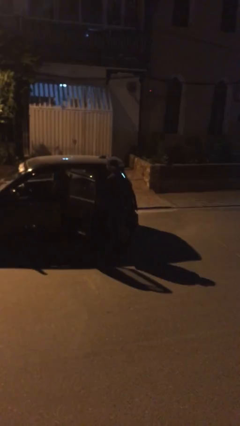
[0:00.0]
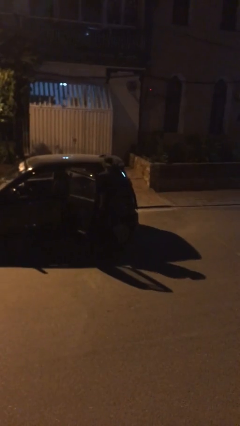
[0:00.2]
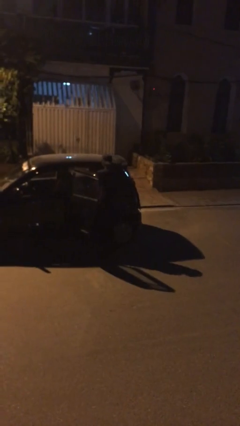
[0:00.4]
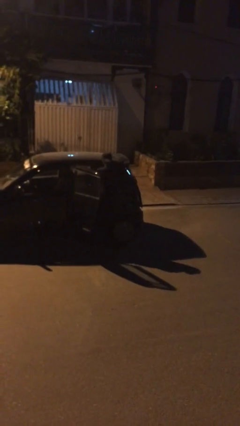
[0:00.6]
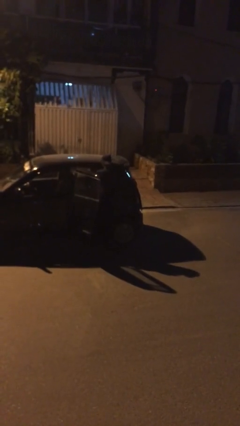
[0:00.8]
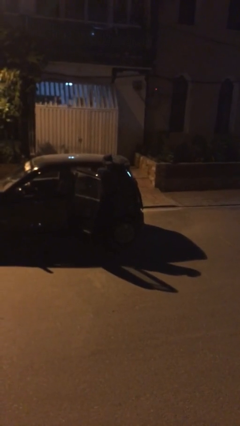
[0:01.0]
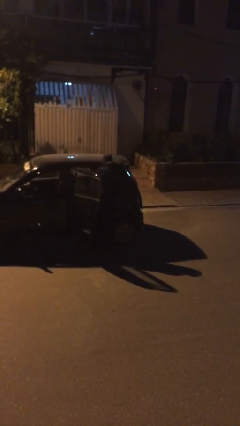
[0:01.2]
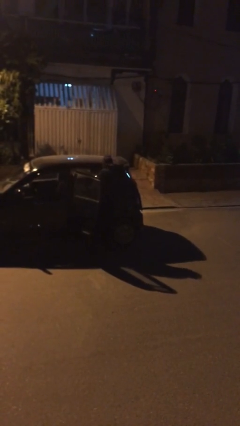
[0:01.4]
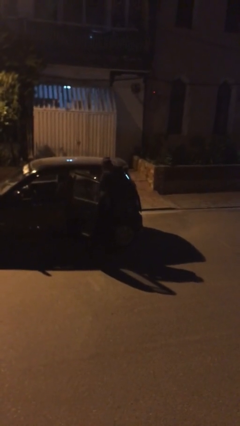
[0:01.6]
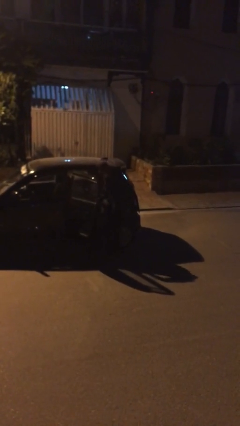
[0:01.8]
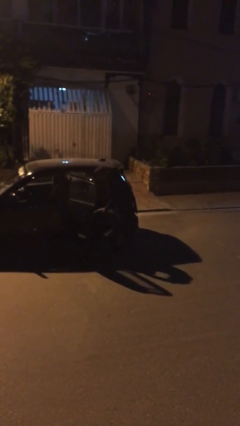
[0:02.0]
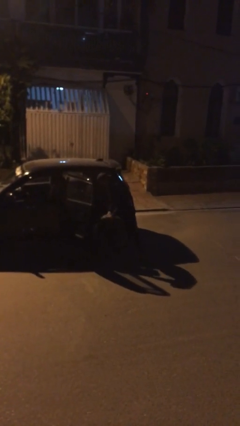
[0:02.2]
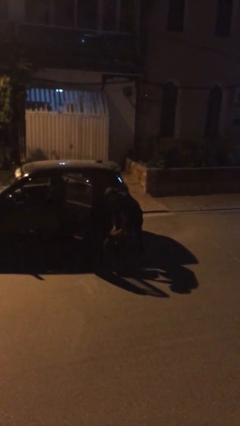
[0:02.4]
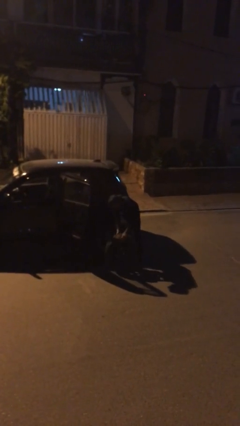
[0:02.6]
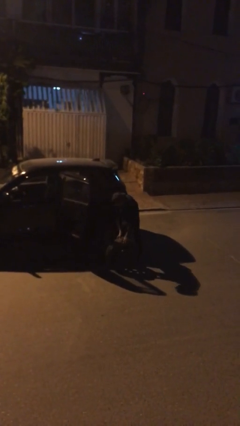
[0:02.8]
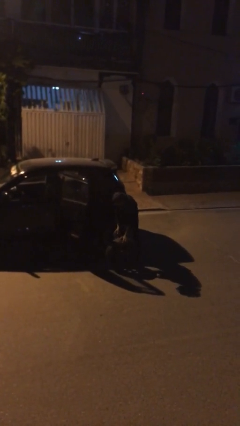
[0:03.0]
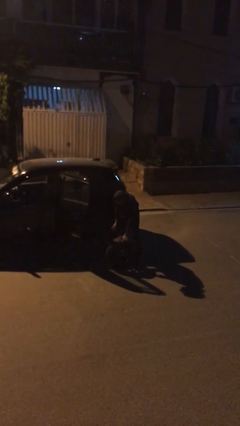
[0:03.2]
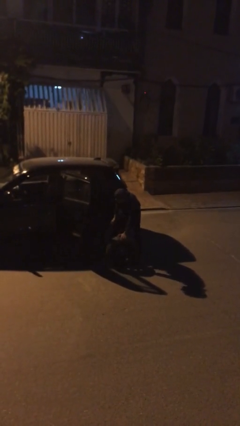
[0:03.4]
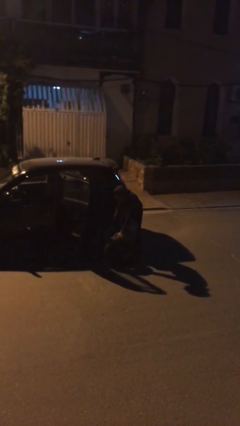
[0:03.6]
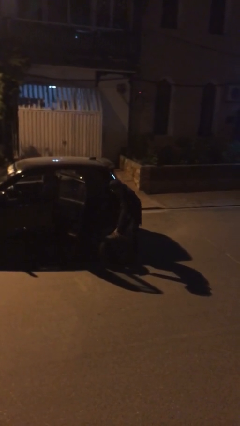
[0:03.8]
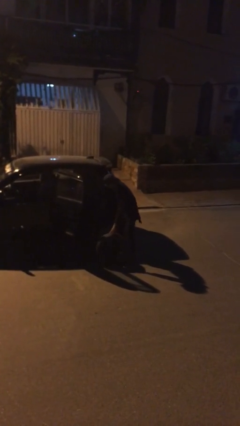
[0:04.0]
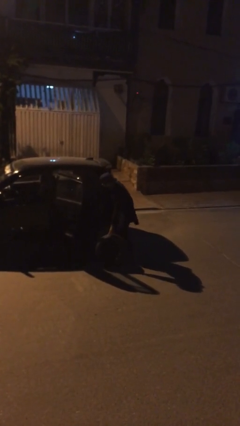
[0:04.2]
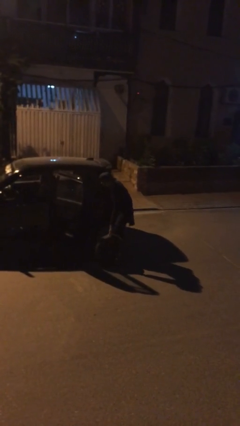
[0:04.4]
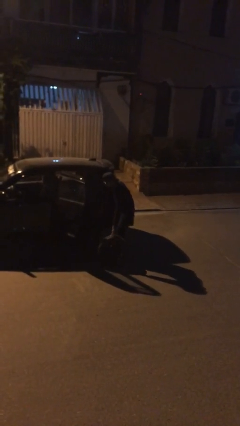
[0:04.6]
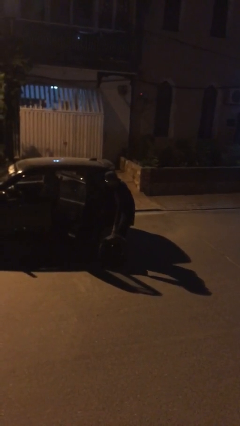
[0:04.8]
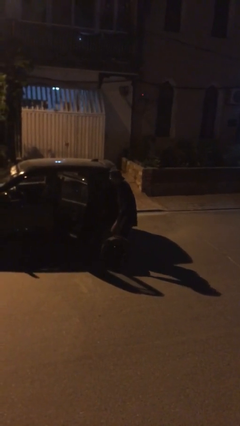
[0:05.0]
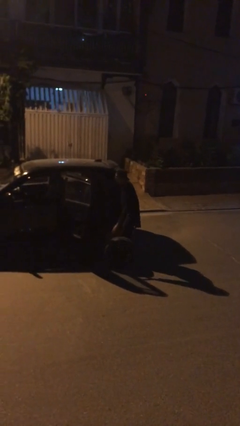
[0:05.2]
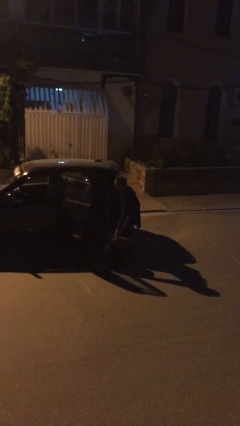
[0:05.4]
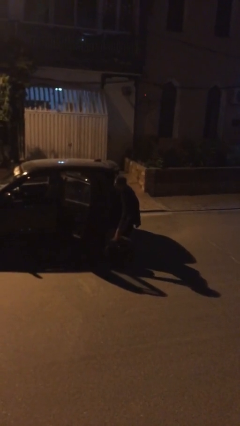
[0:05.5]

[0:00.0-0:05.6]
person unloads car

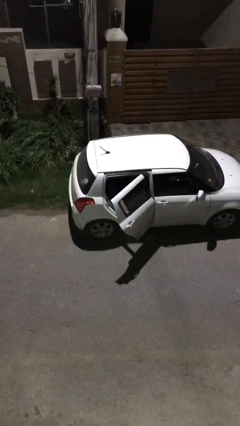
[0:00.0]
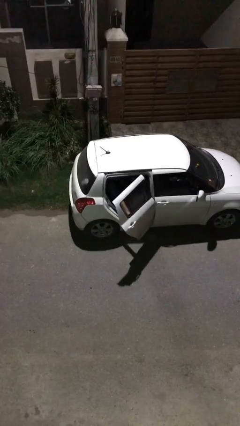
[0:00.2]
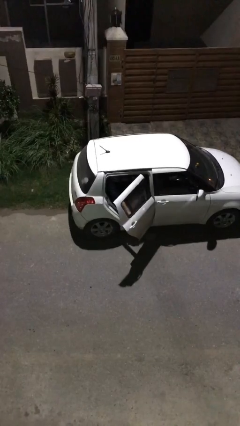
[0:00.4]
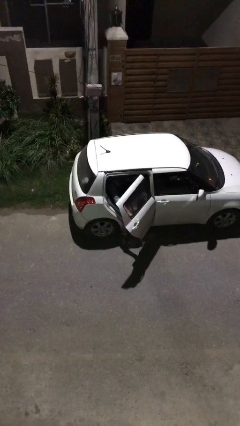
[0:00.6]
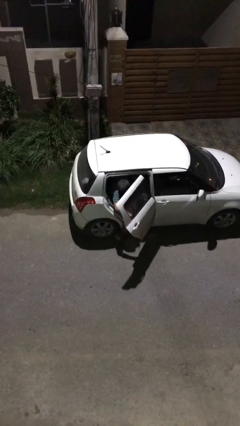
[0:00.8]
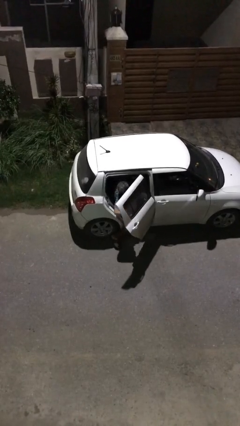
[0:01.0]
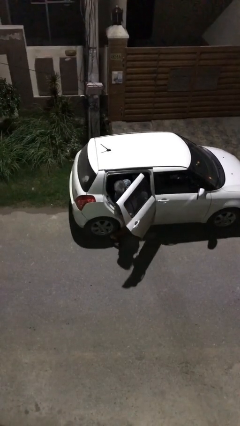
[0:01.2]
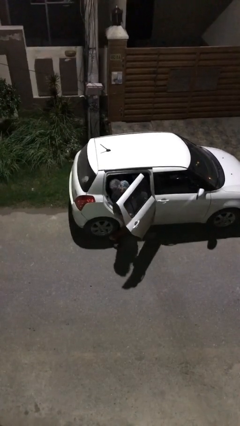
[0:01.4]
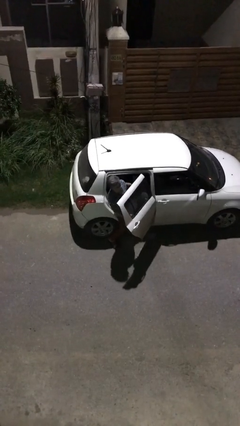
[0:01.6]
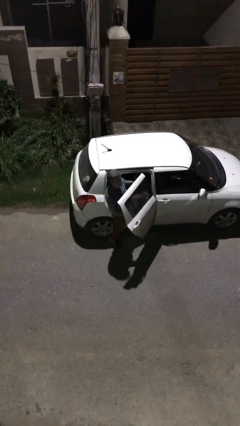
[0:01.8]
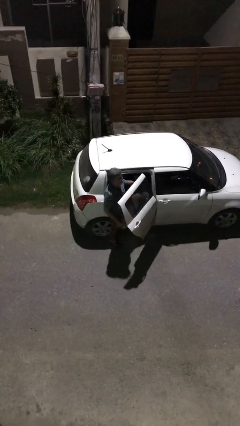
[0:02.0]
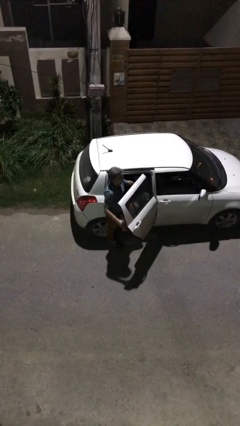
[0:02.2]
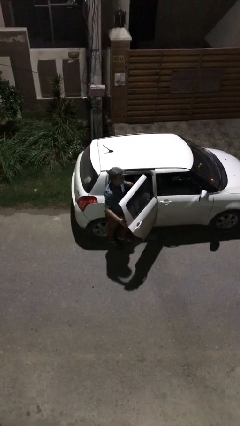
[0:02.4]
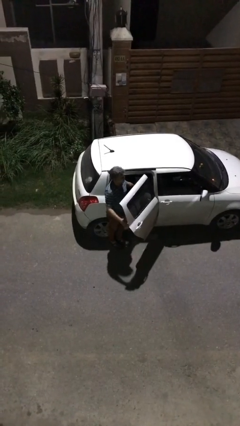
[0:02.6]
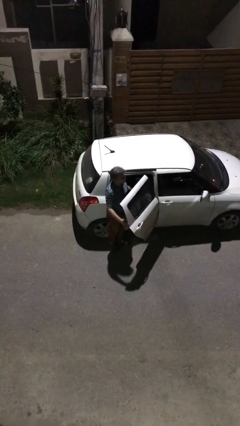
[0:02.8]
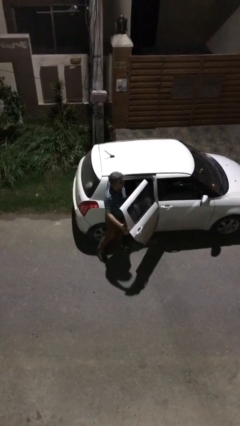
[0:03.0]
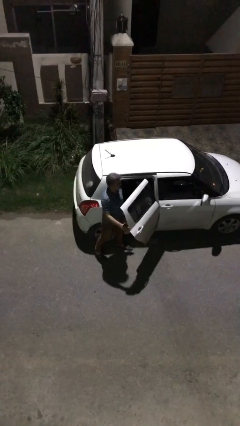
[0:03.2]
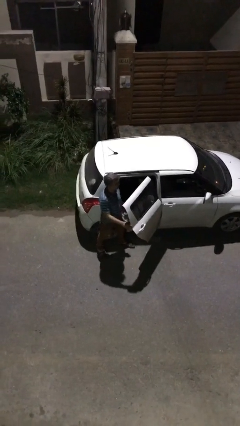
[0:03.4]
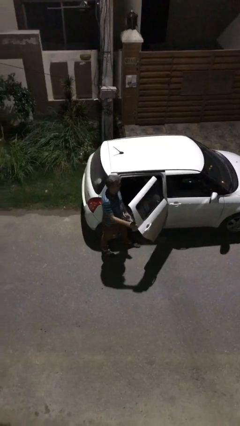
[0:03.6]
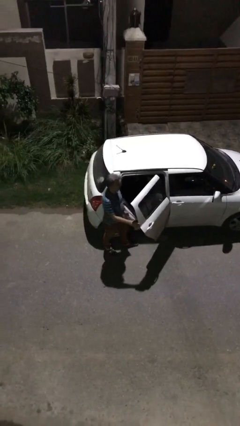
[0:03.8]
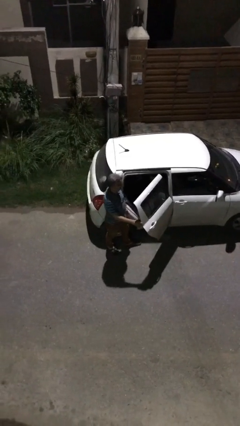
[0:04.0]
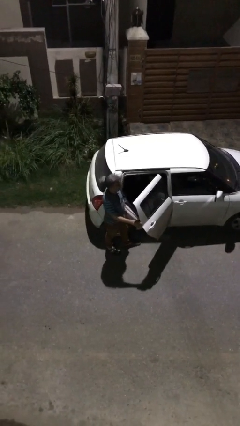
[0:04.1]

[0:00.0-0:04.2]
person exits car

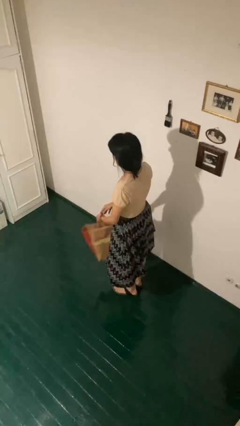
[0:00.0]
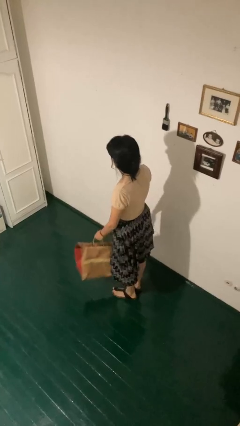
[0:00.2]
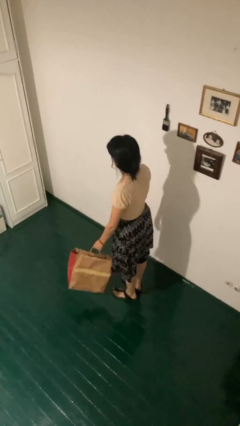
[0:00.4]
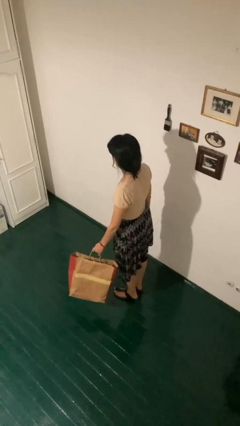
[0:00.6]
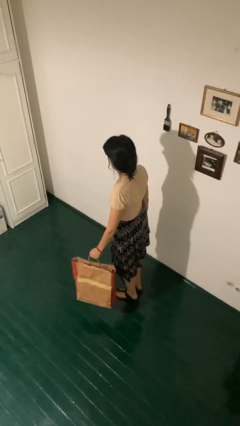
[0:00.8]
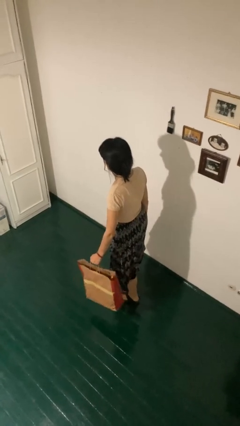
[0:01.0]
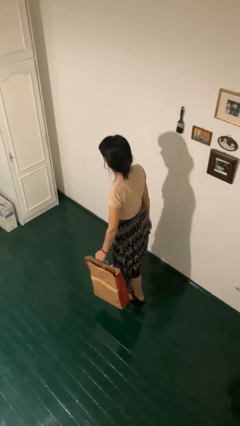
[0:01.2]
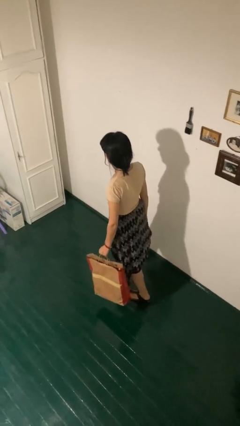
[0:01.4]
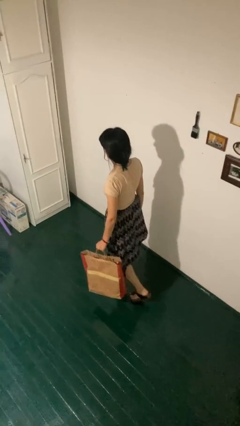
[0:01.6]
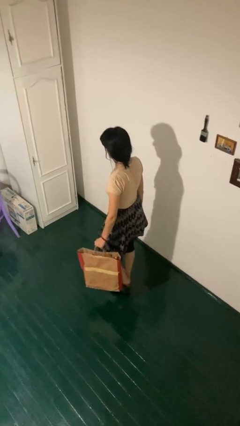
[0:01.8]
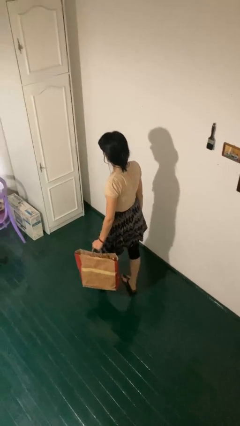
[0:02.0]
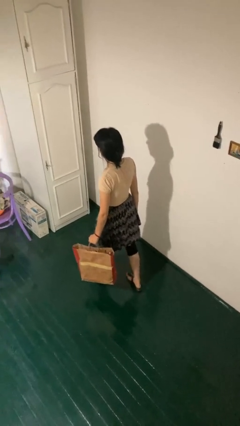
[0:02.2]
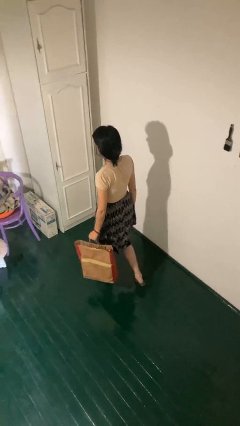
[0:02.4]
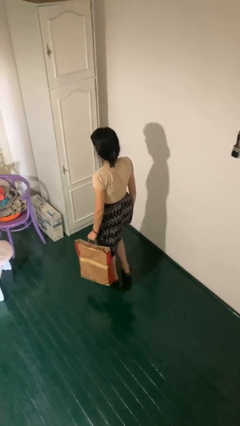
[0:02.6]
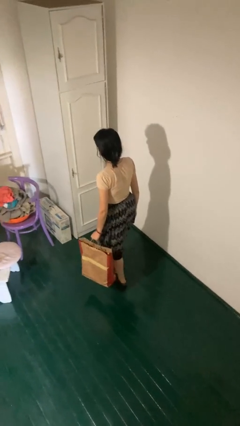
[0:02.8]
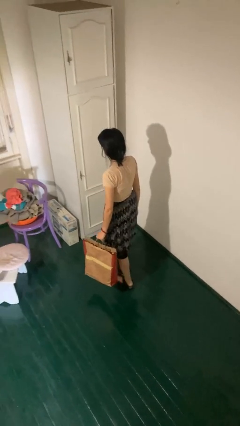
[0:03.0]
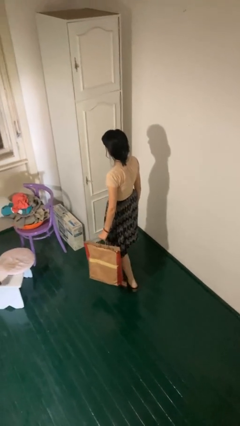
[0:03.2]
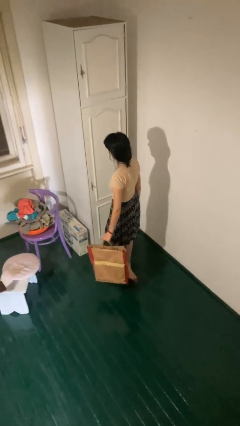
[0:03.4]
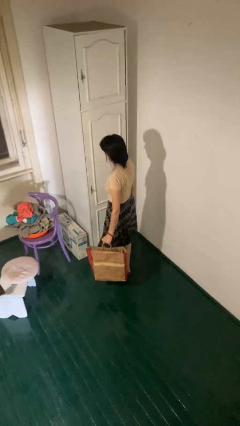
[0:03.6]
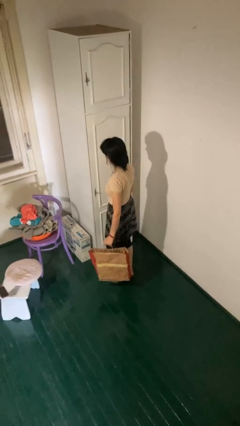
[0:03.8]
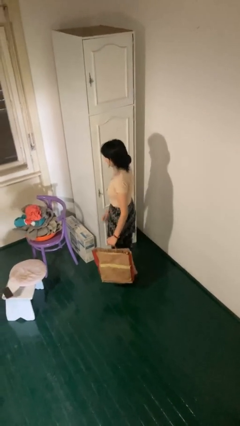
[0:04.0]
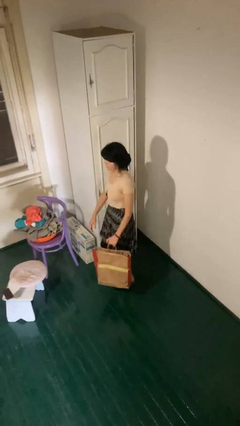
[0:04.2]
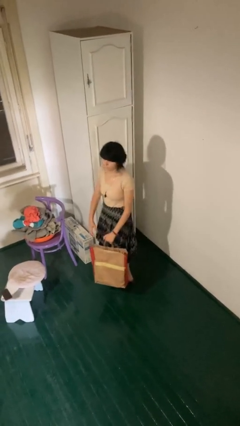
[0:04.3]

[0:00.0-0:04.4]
person carries groceries

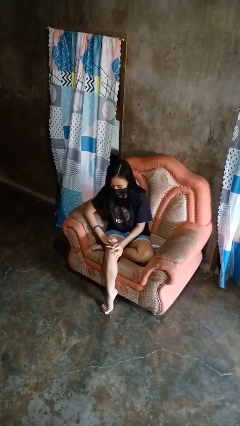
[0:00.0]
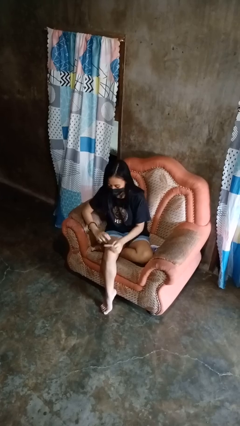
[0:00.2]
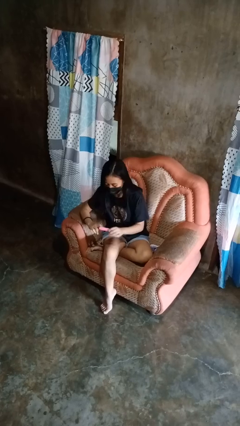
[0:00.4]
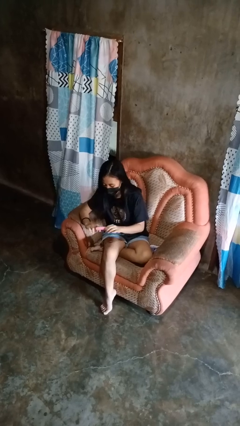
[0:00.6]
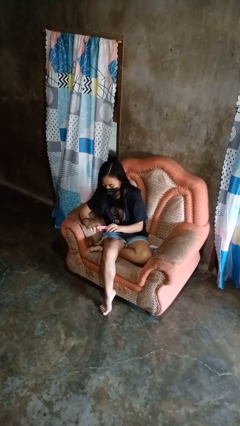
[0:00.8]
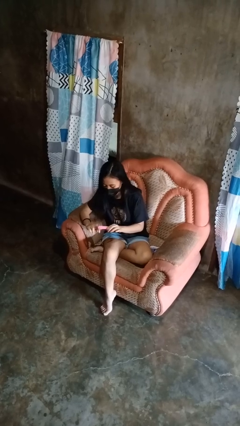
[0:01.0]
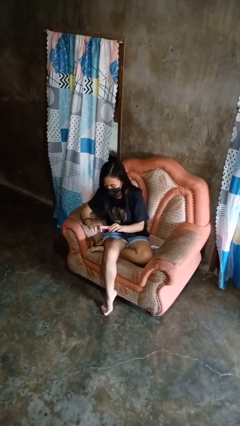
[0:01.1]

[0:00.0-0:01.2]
person files fingernails

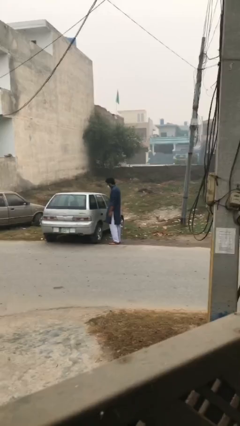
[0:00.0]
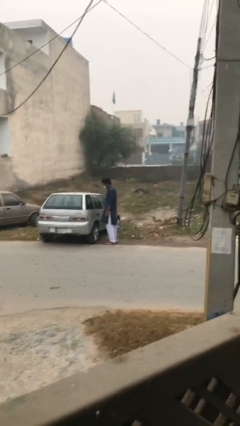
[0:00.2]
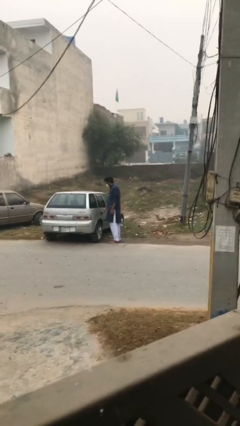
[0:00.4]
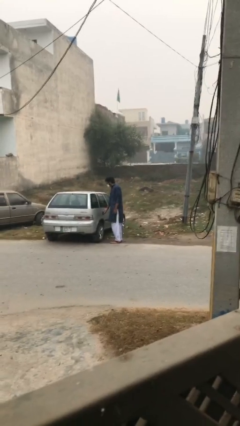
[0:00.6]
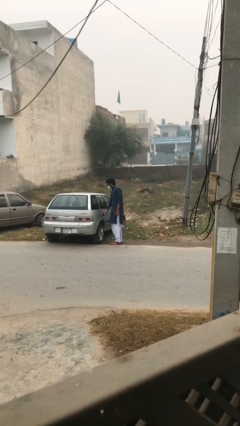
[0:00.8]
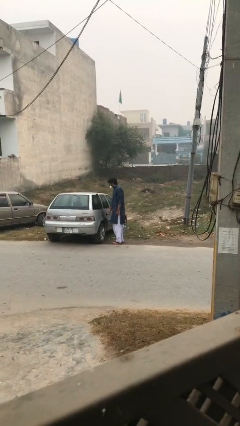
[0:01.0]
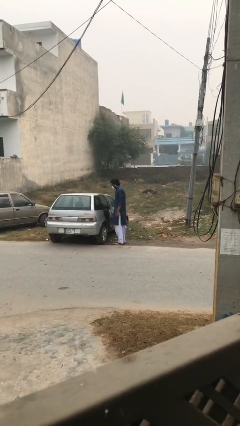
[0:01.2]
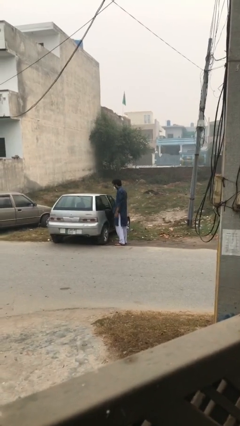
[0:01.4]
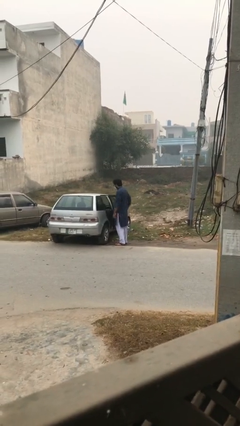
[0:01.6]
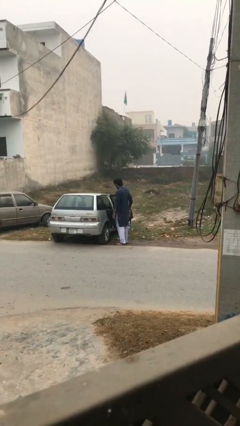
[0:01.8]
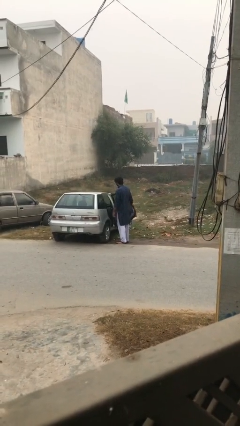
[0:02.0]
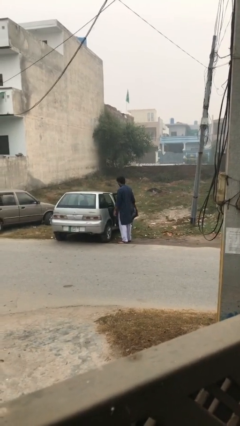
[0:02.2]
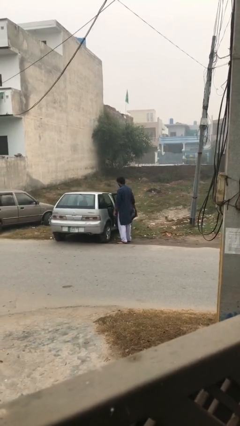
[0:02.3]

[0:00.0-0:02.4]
person opens car door
